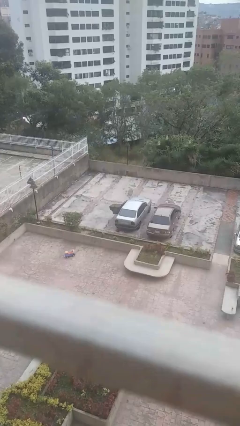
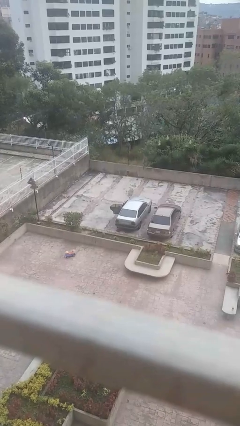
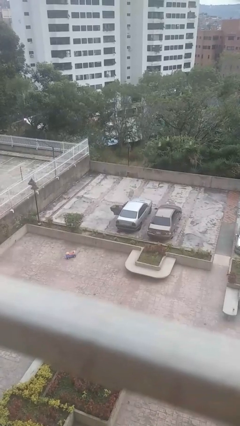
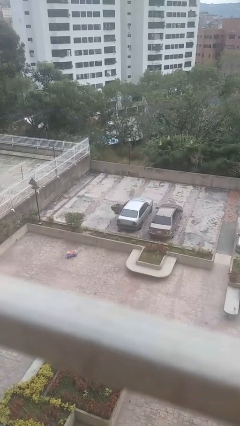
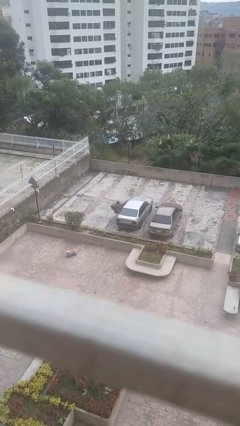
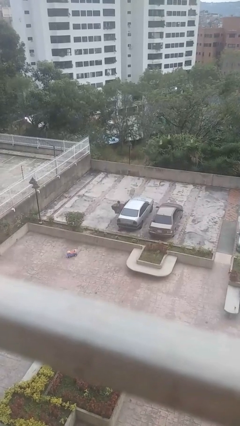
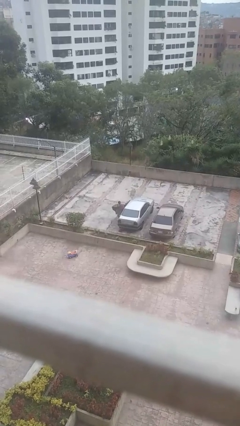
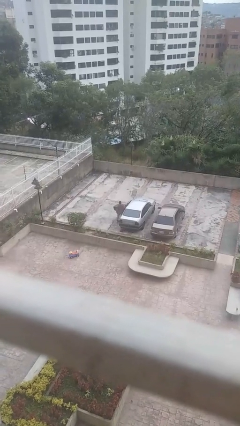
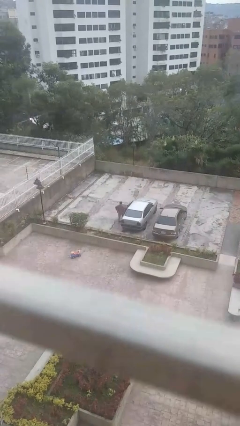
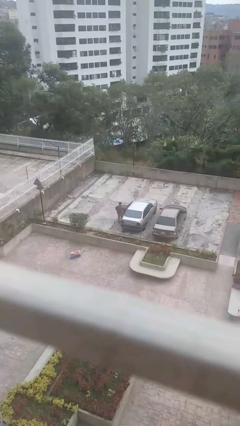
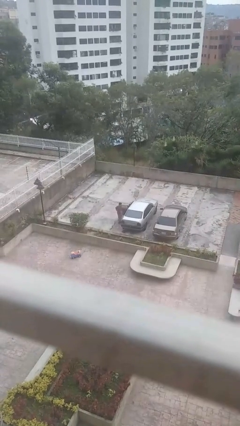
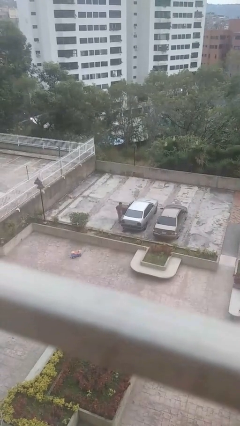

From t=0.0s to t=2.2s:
person exits car

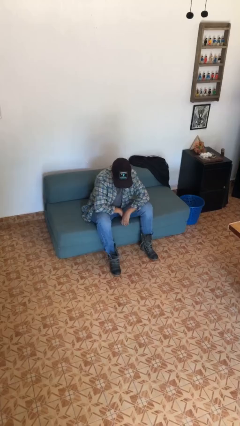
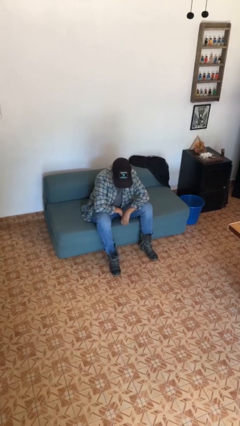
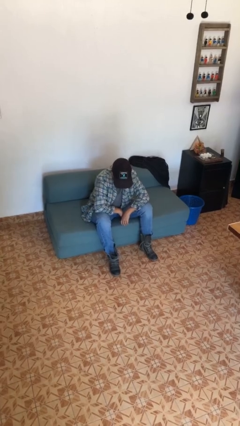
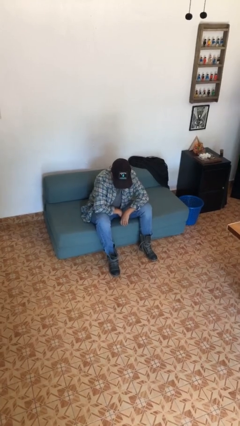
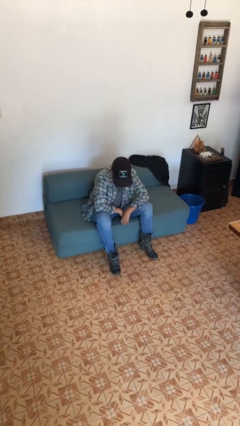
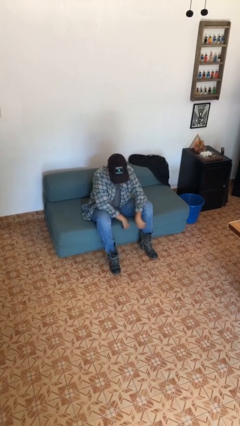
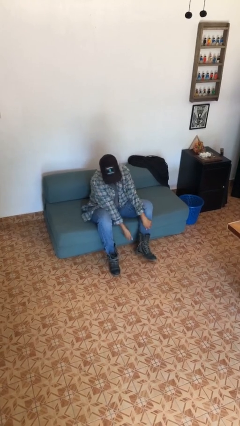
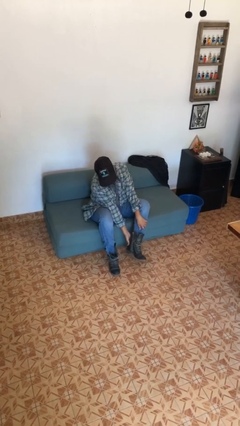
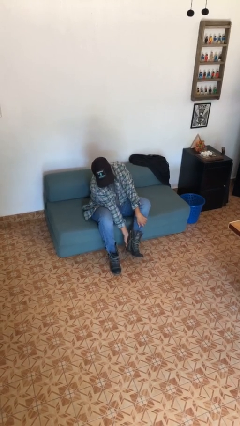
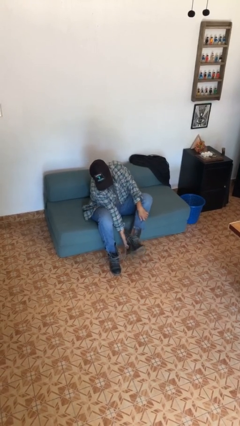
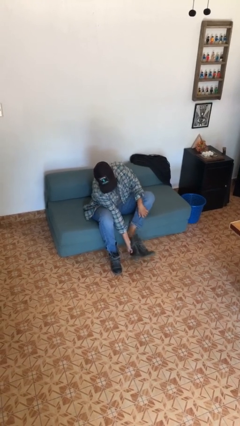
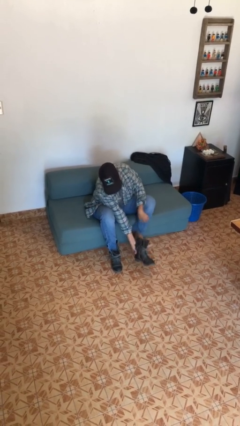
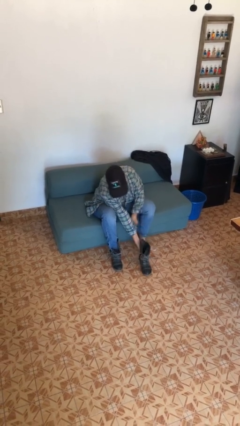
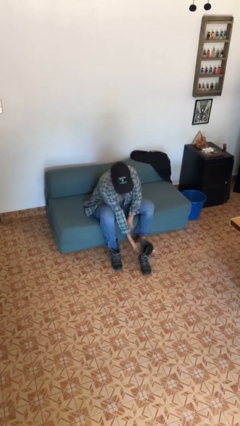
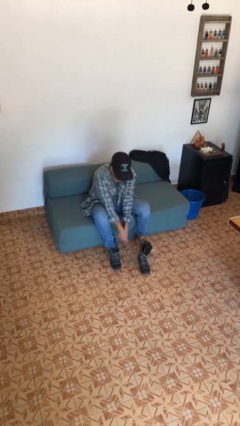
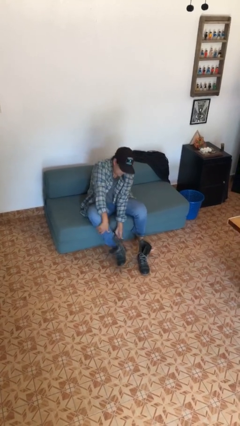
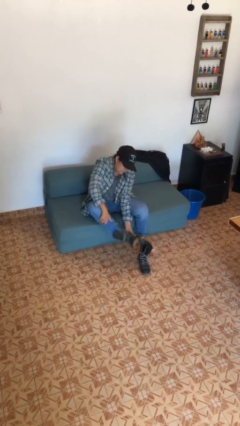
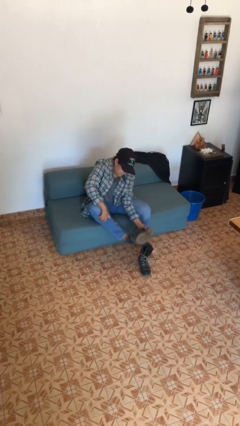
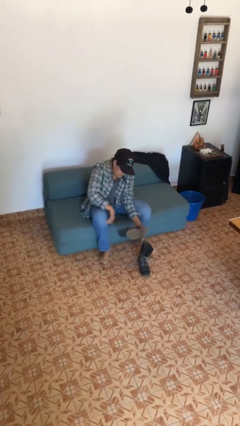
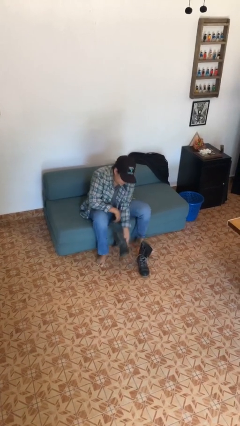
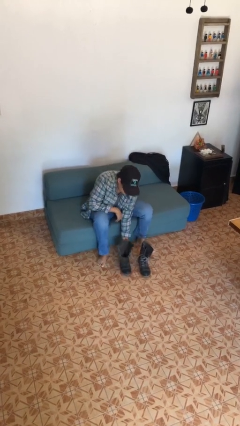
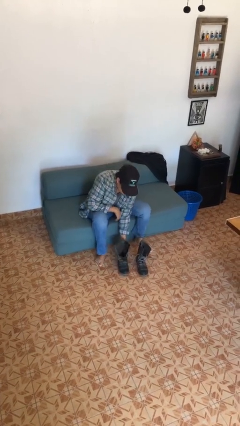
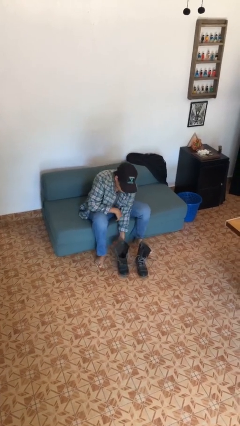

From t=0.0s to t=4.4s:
person takes off boots

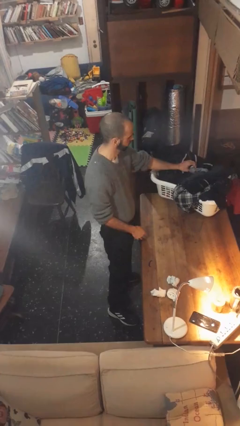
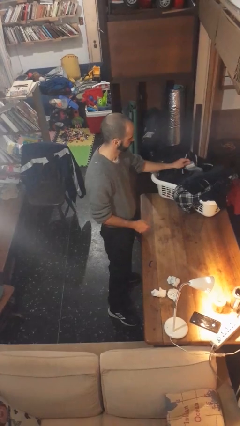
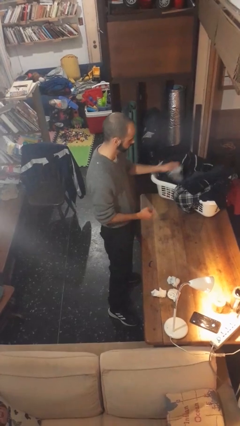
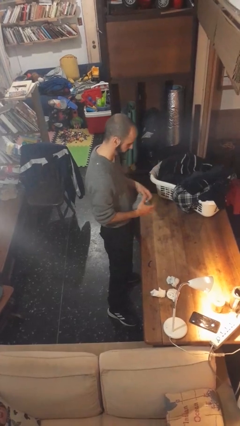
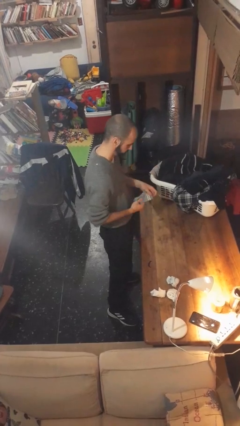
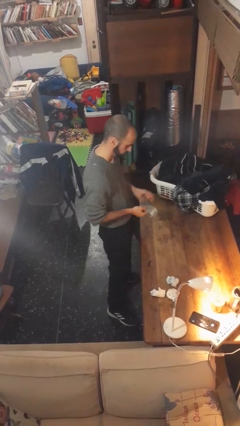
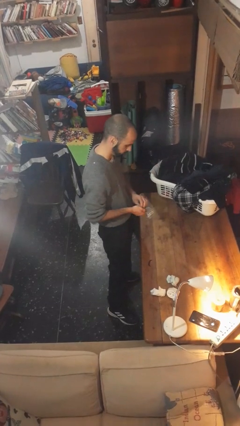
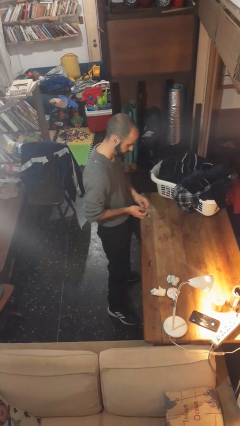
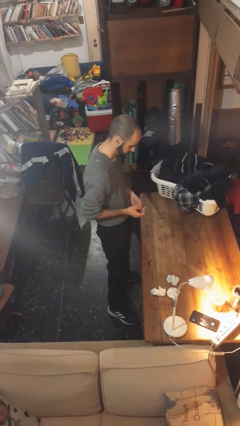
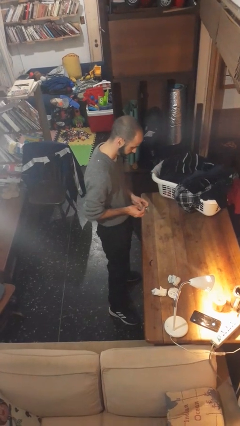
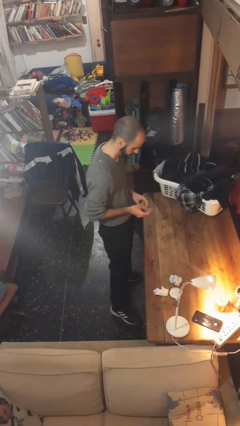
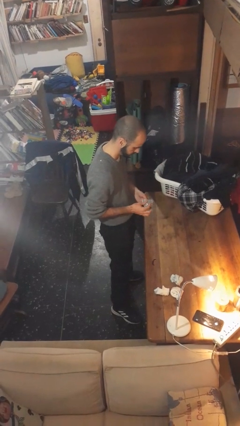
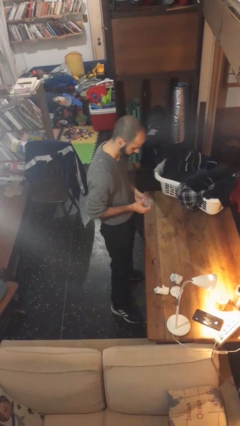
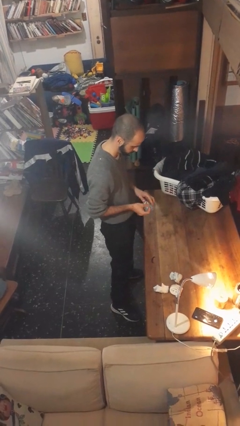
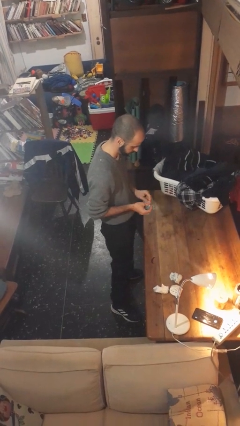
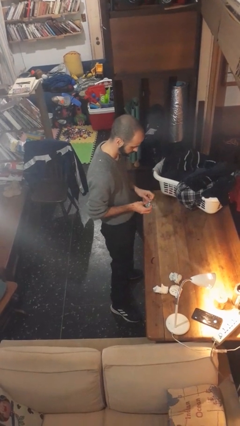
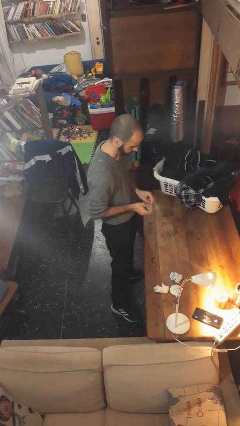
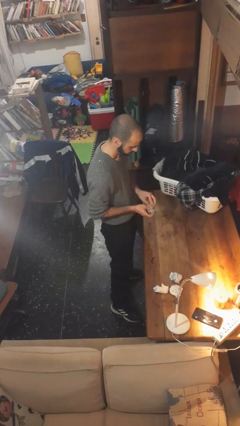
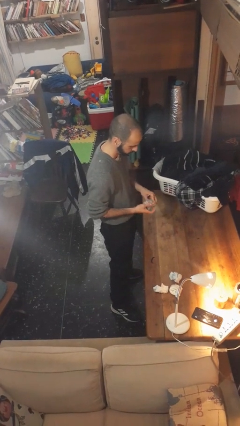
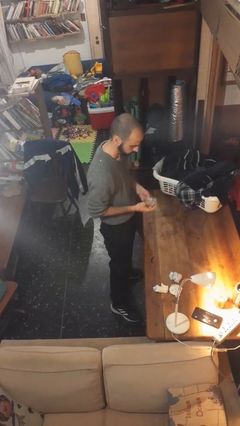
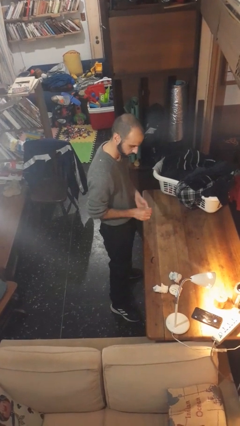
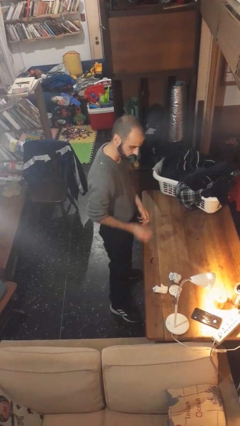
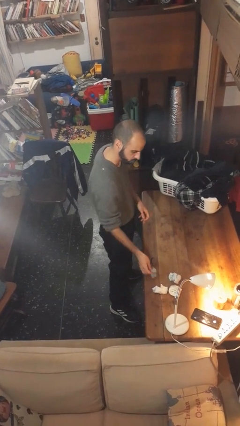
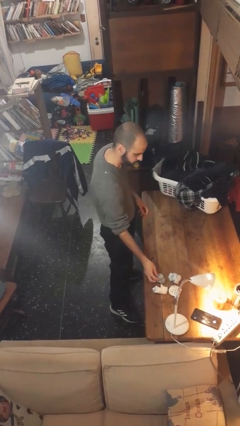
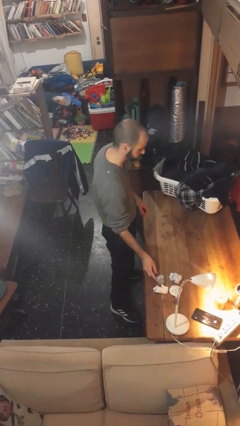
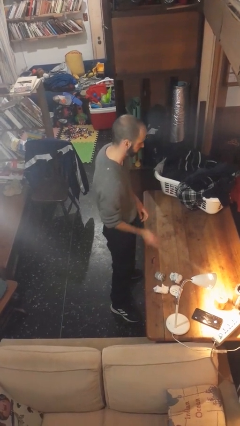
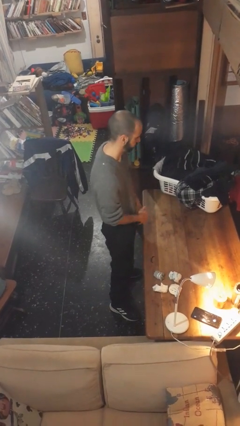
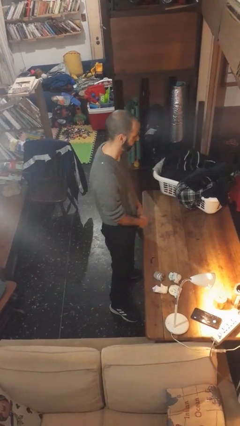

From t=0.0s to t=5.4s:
person folds socks

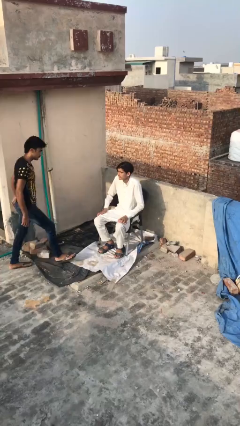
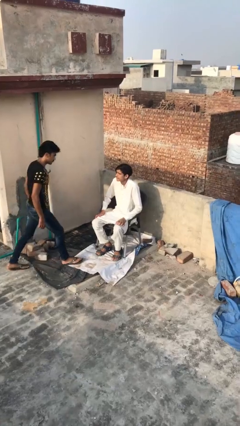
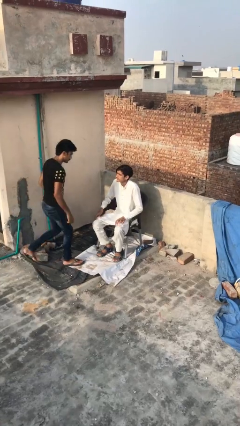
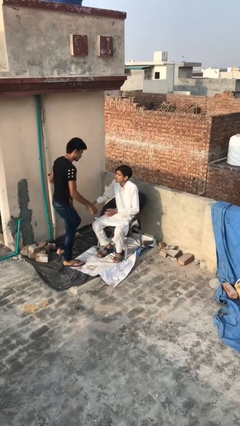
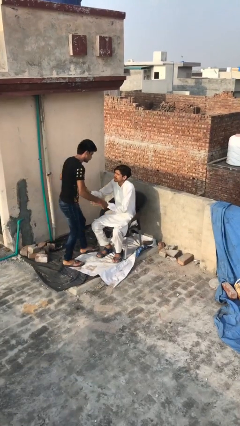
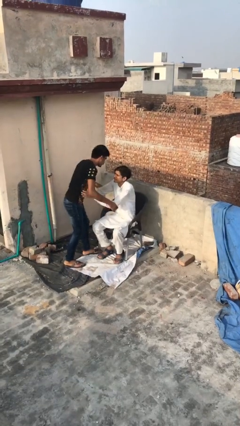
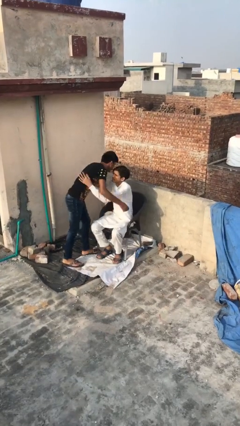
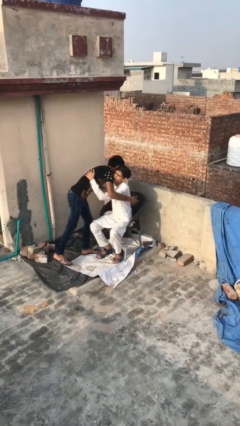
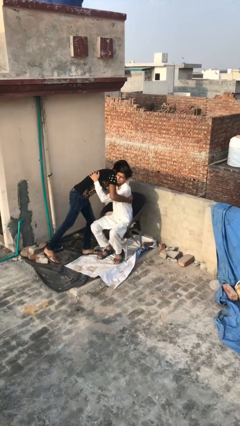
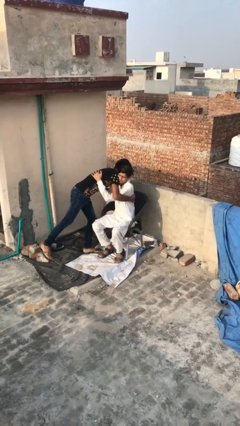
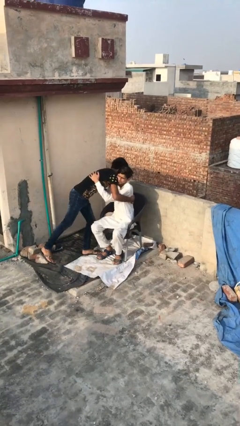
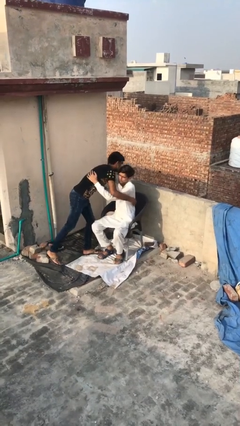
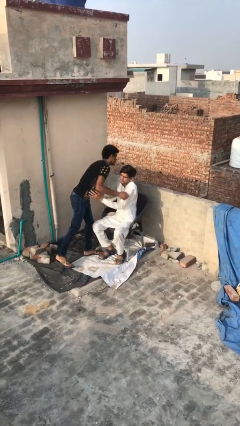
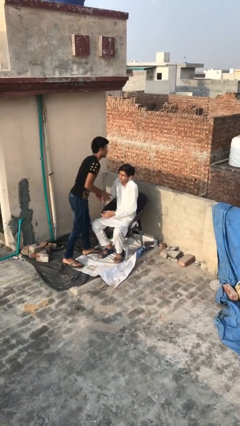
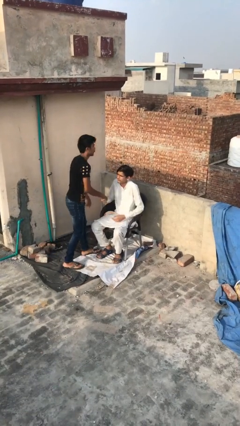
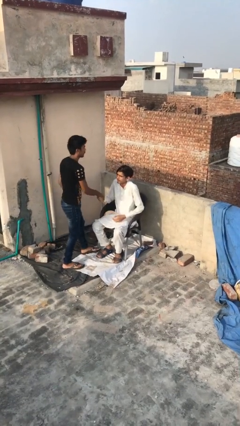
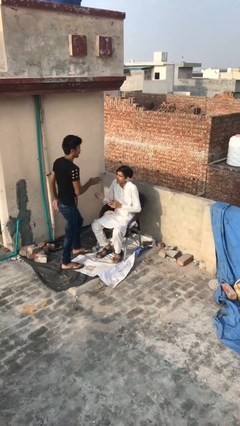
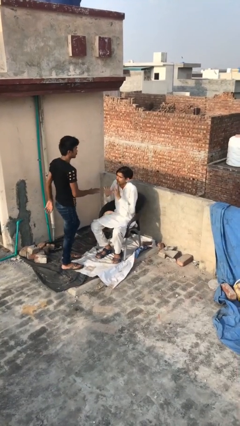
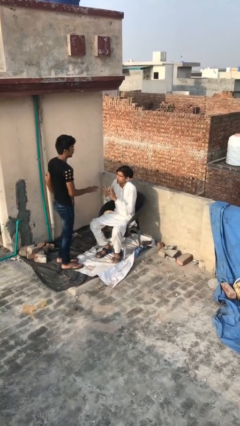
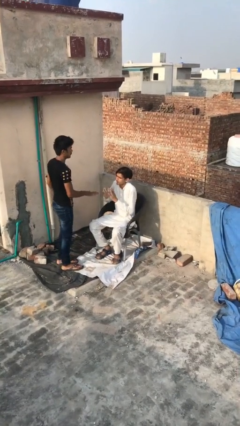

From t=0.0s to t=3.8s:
person embraces person

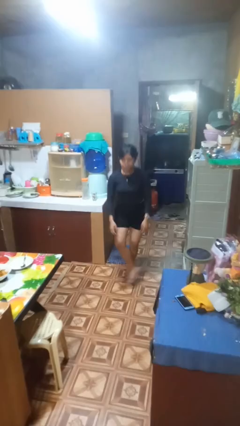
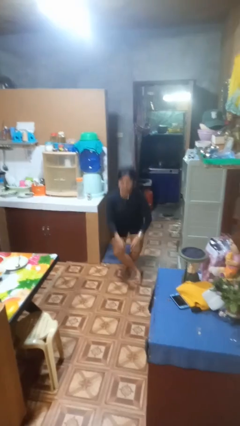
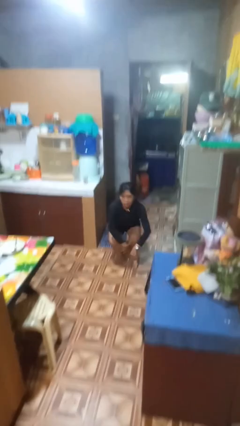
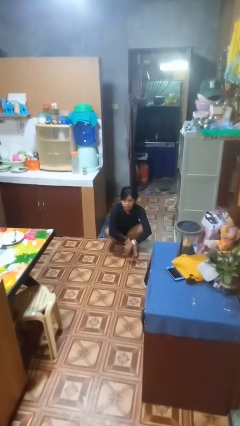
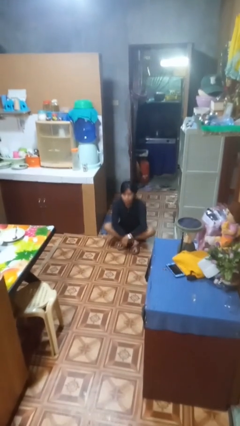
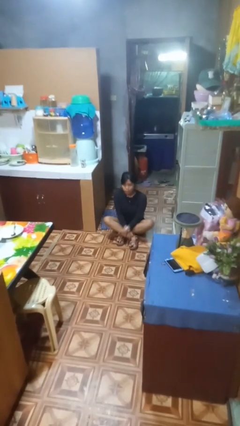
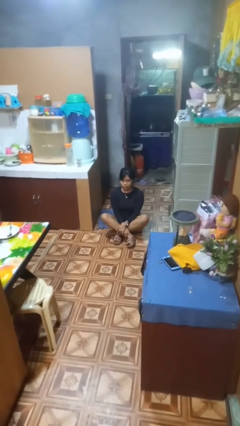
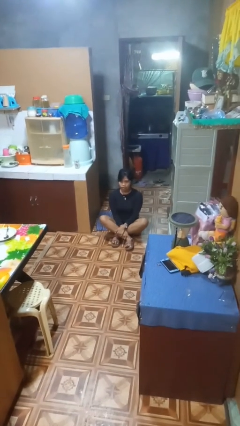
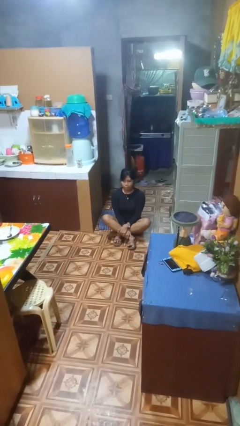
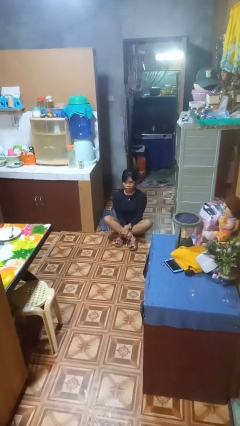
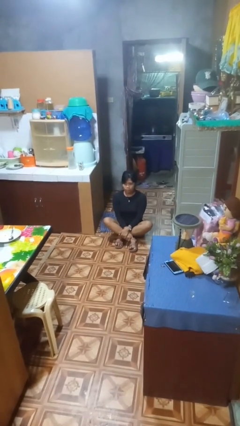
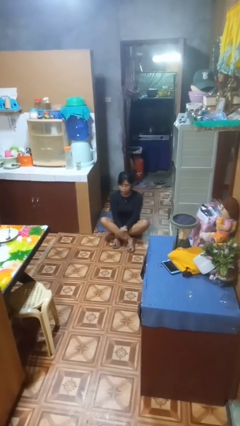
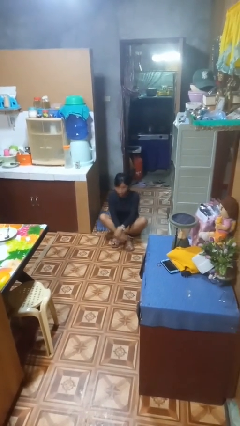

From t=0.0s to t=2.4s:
person sits crisscross
